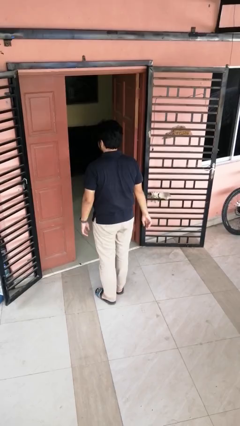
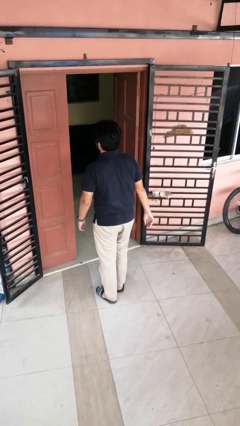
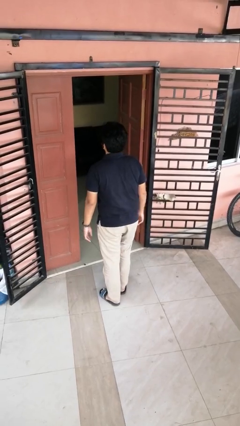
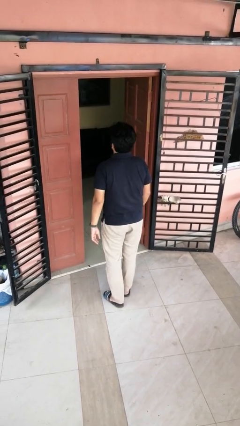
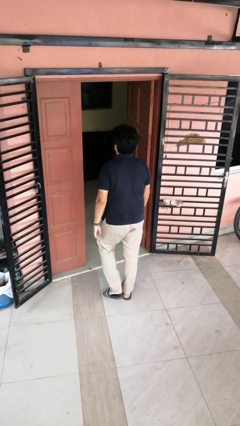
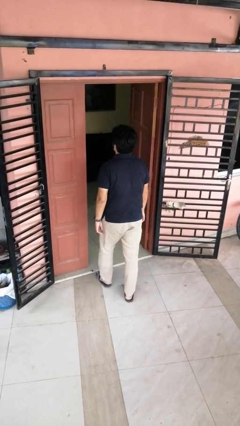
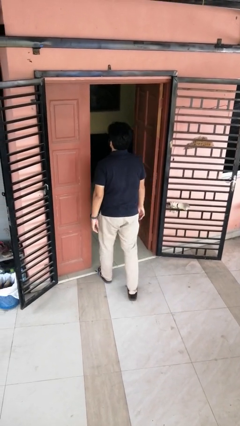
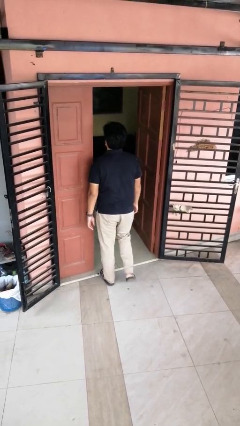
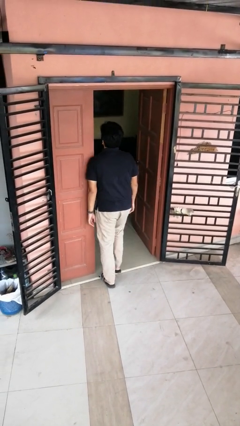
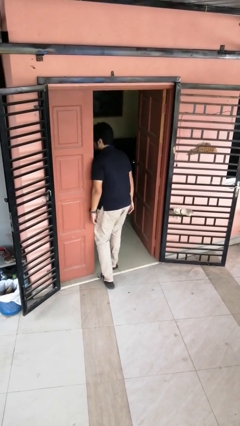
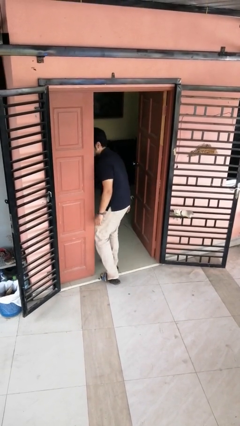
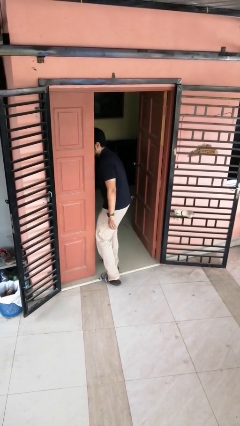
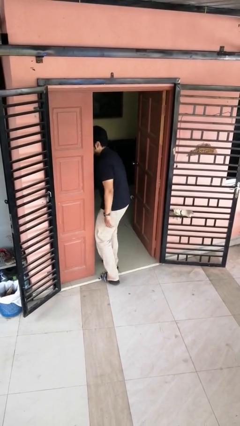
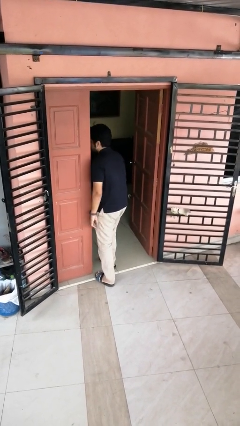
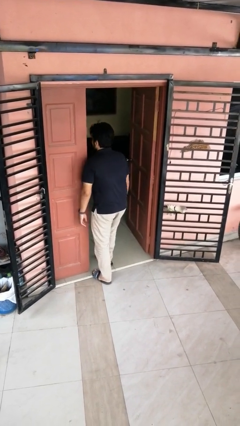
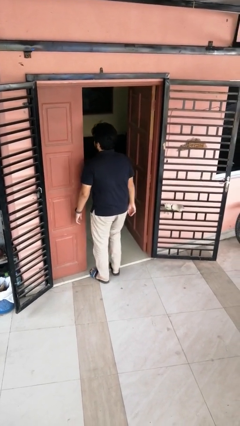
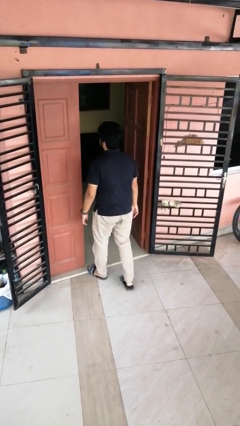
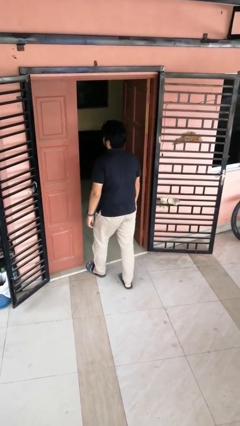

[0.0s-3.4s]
person bumps into wall

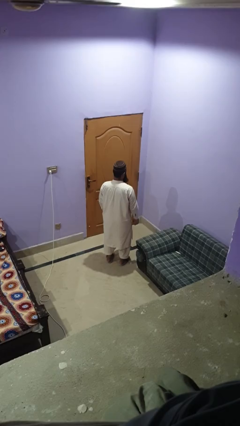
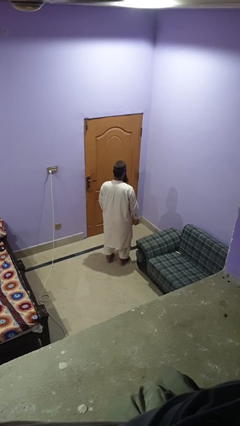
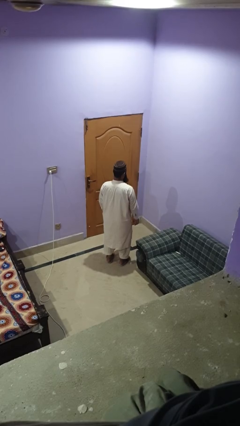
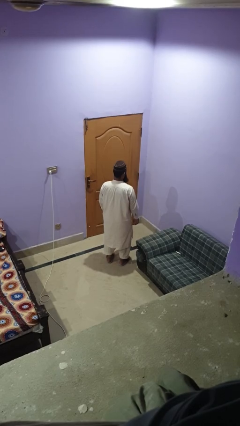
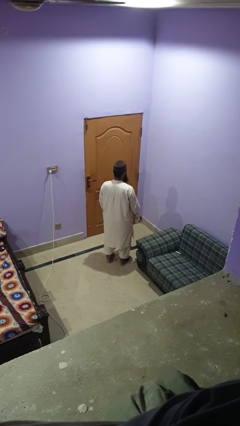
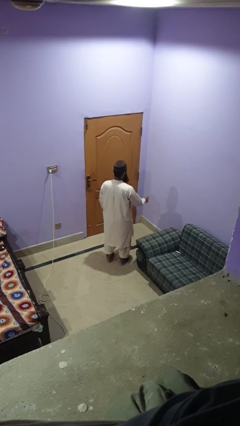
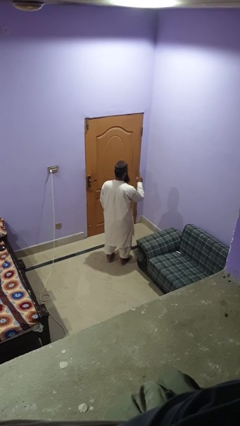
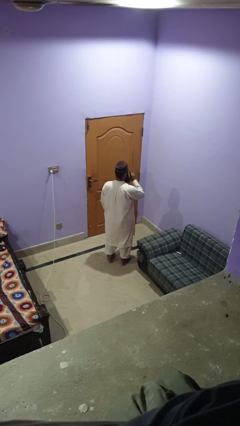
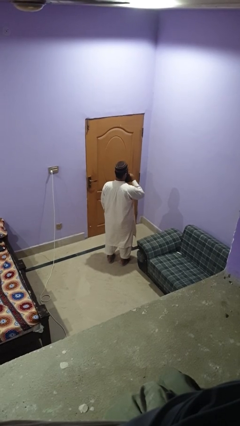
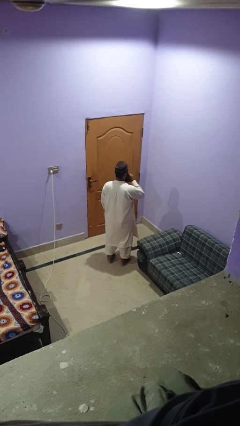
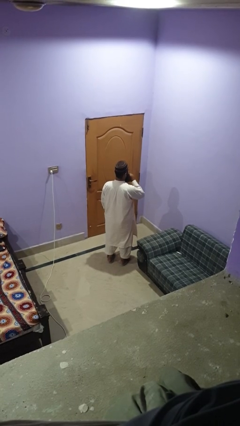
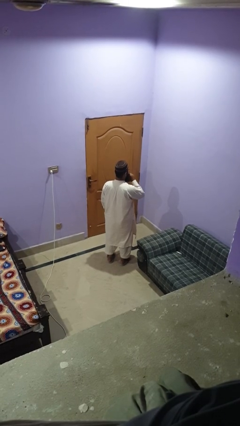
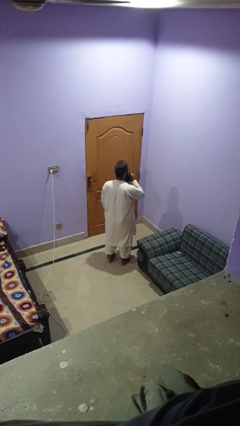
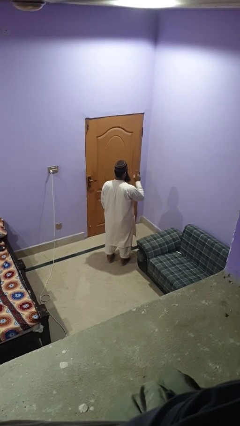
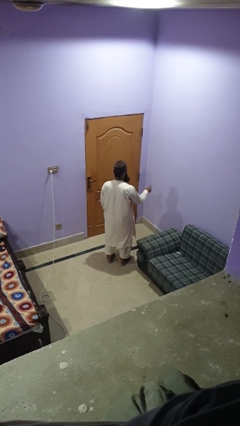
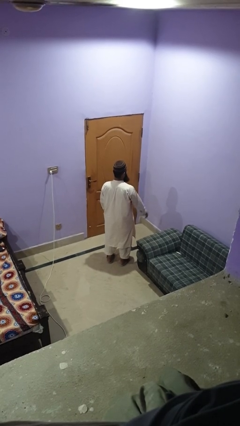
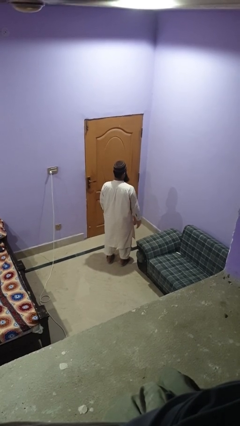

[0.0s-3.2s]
person gestures be quiet

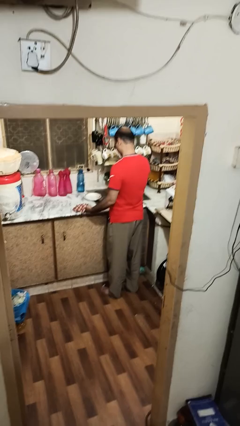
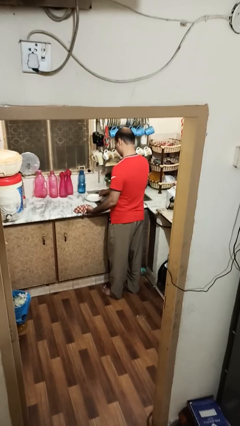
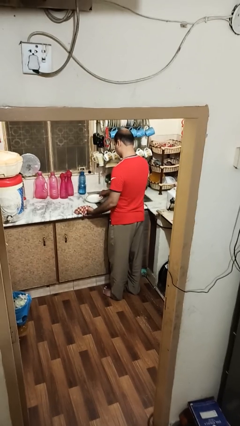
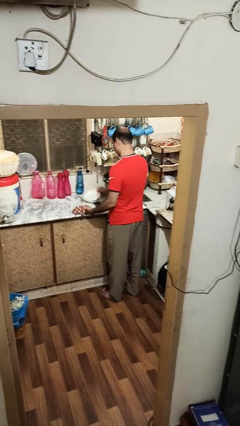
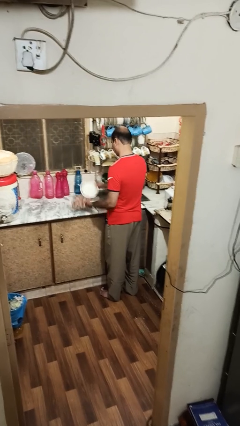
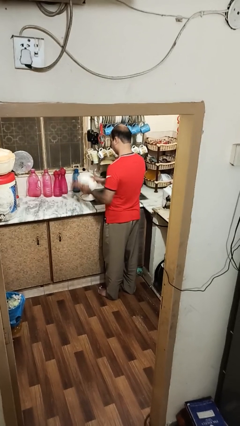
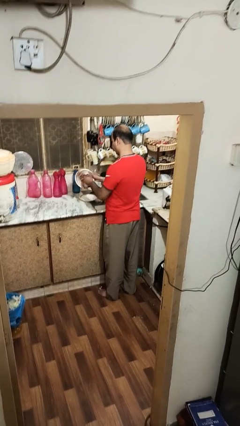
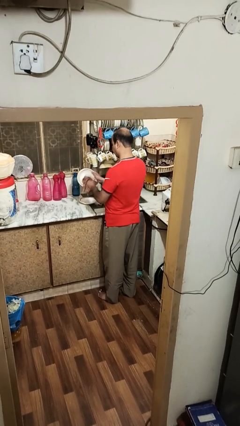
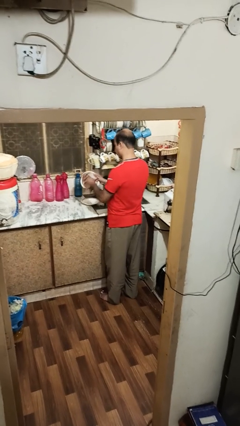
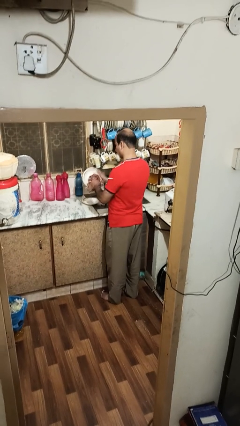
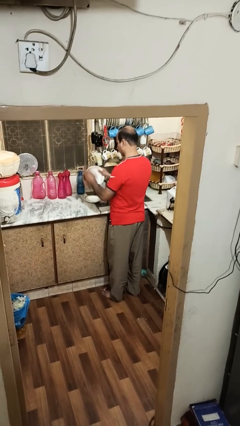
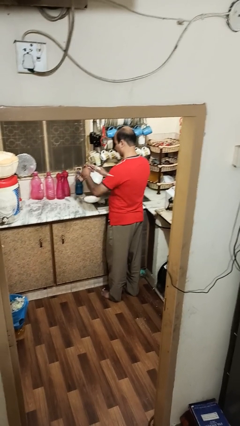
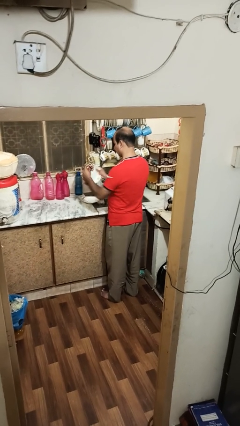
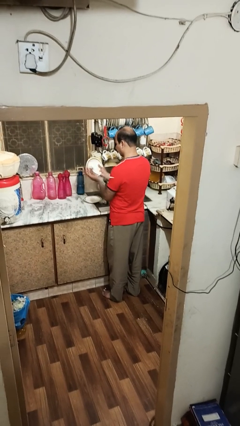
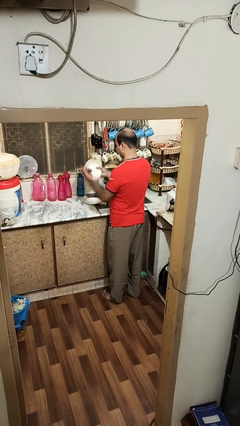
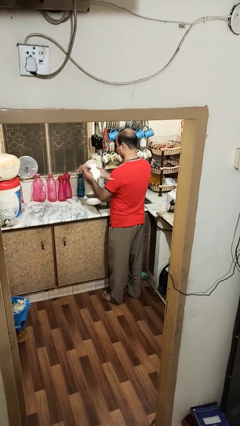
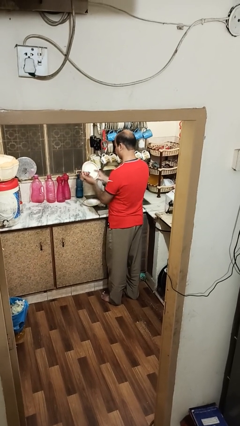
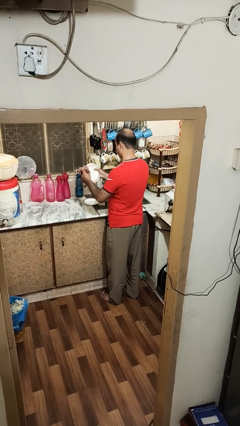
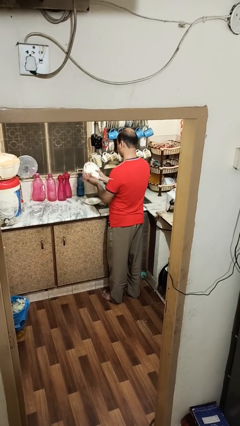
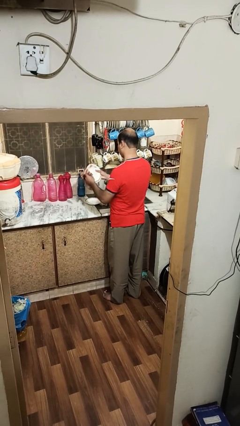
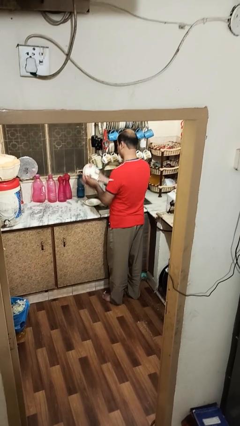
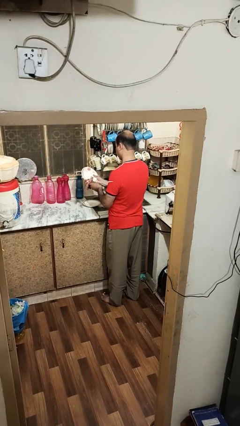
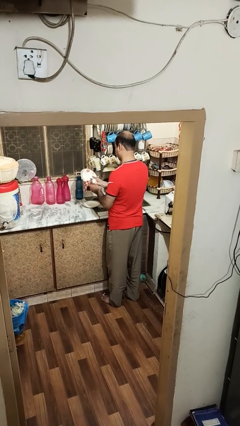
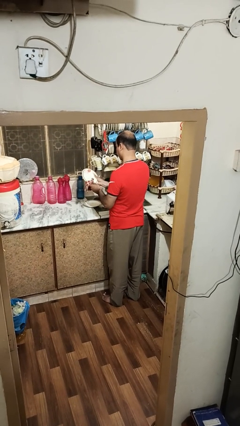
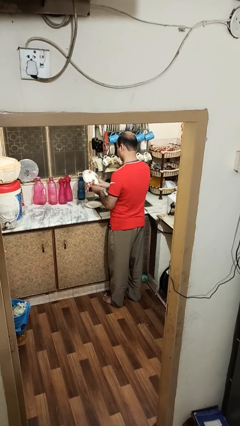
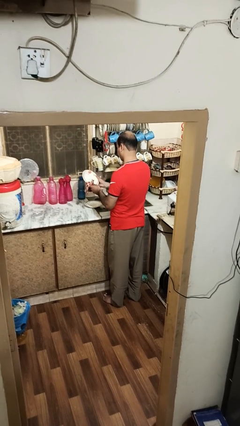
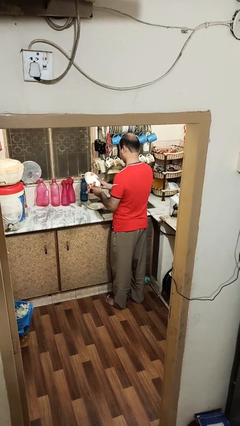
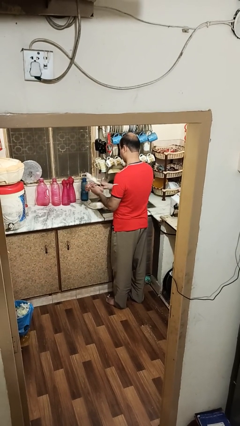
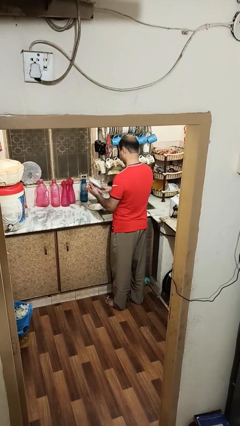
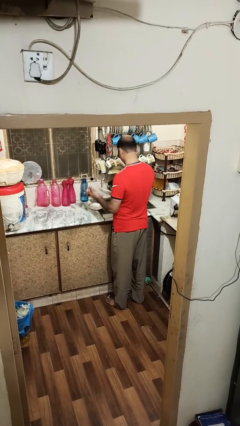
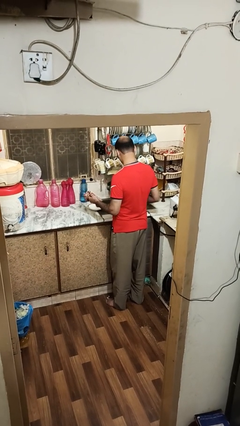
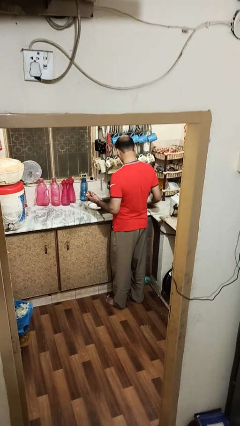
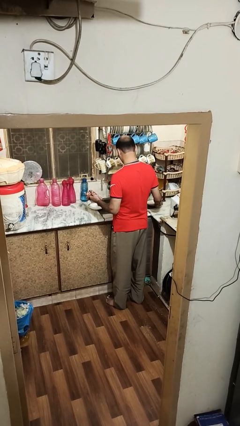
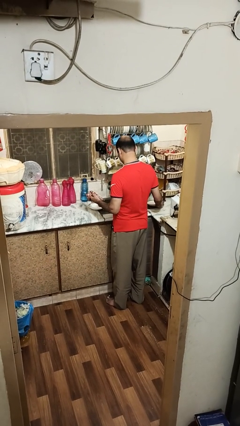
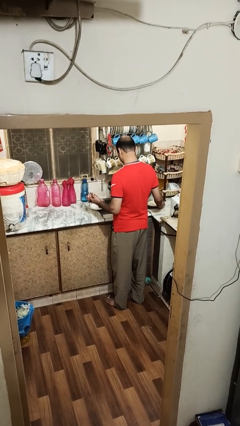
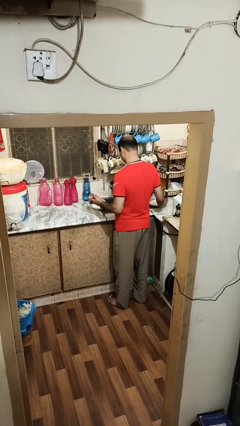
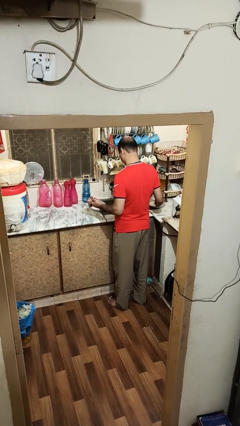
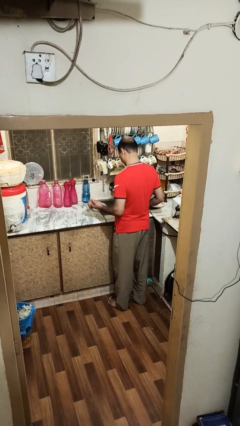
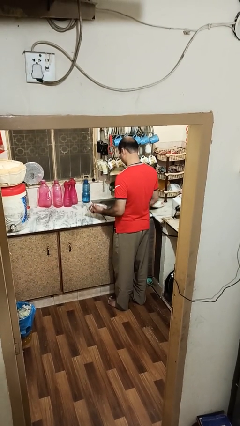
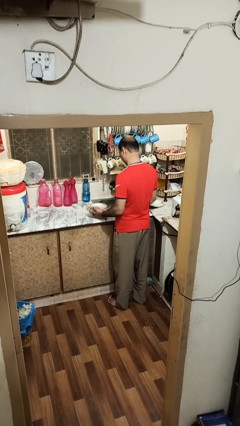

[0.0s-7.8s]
person dries dish

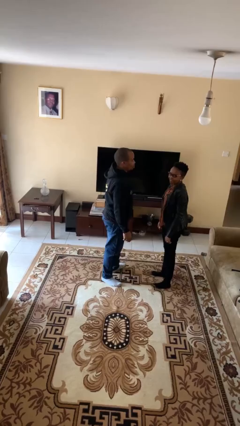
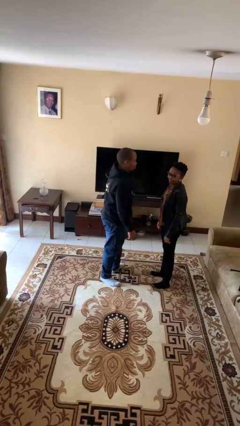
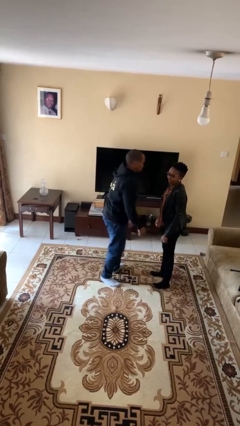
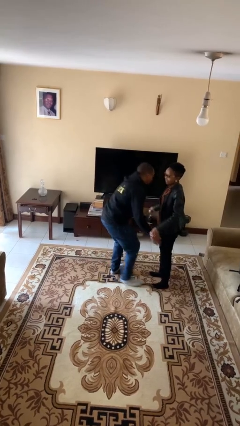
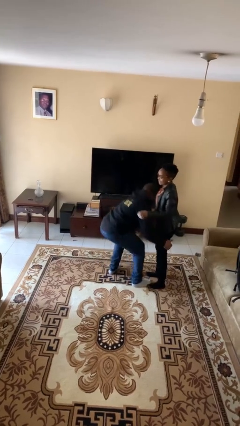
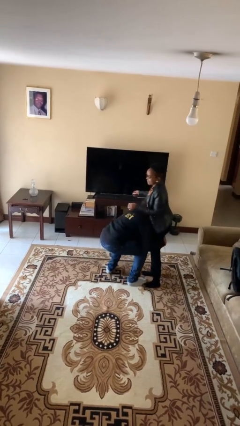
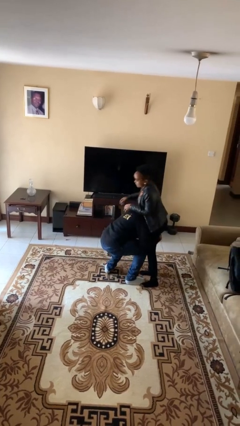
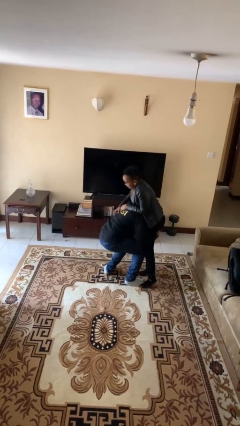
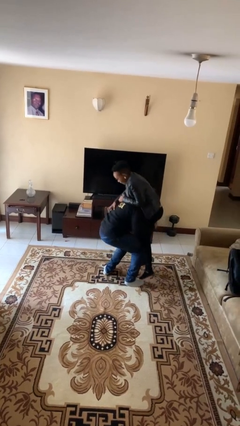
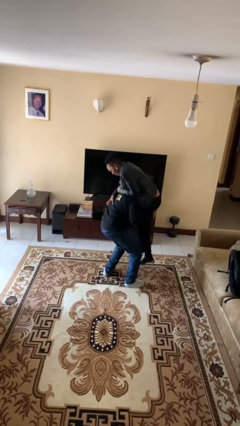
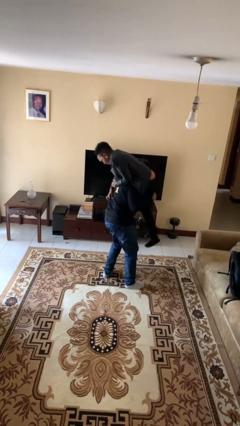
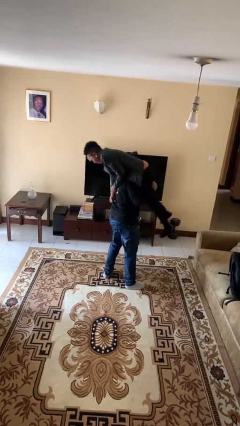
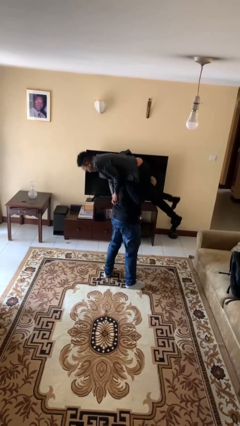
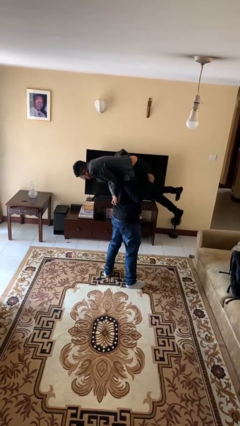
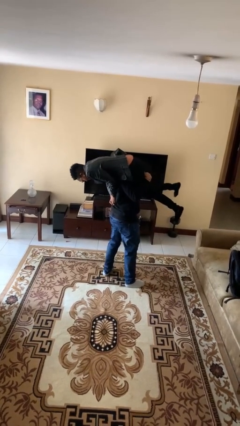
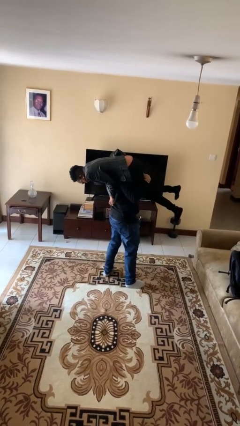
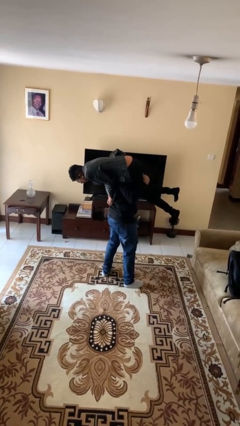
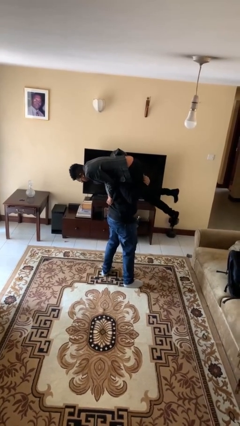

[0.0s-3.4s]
person carries person over shoulder
